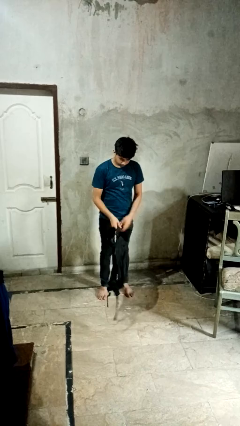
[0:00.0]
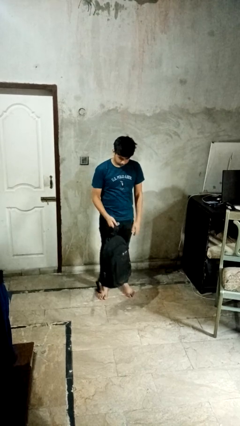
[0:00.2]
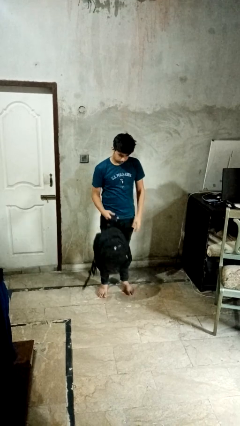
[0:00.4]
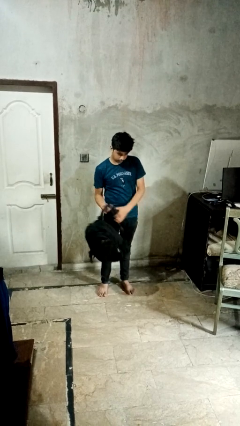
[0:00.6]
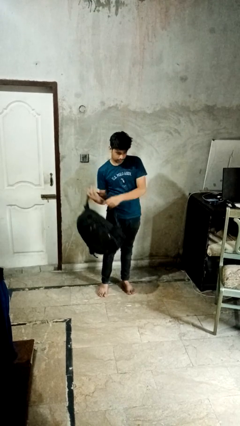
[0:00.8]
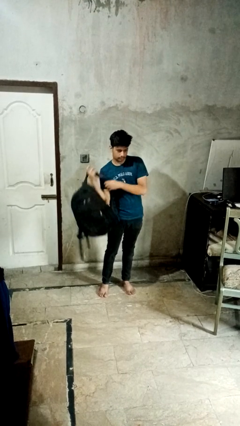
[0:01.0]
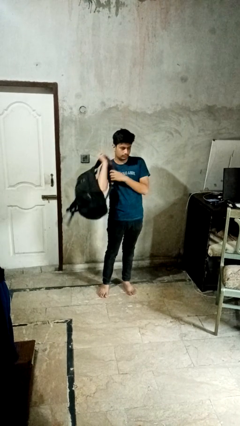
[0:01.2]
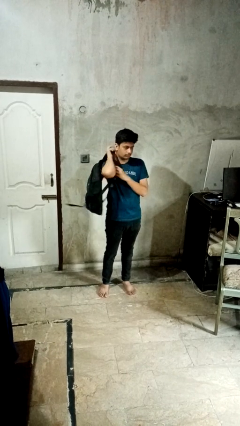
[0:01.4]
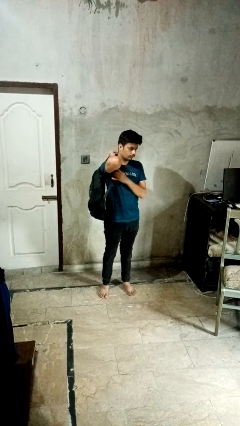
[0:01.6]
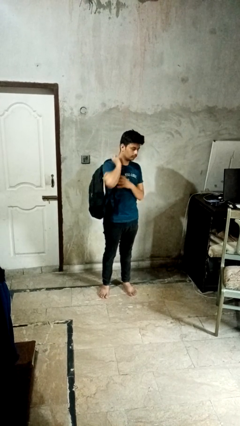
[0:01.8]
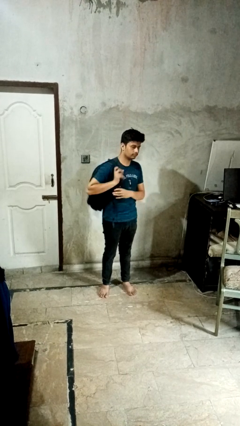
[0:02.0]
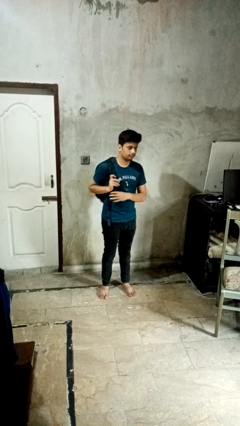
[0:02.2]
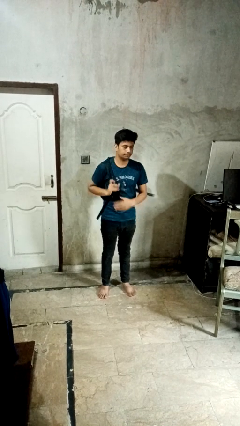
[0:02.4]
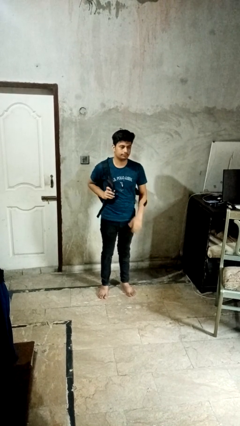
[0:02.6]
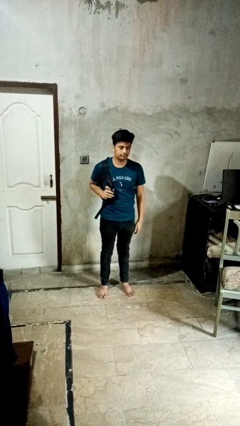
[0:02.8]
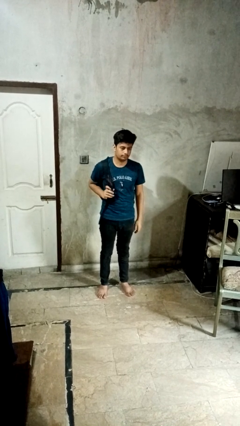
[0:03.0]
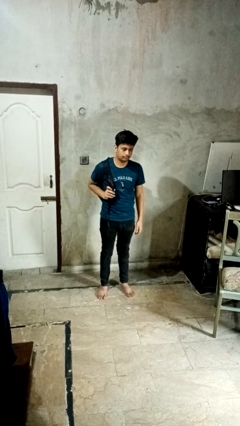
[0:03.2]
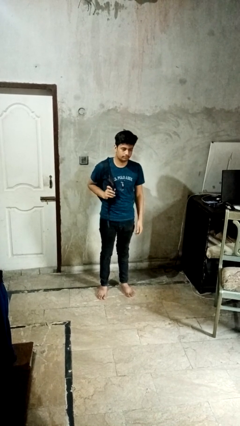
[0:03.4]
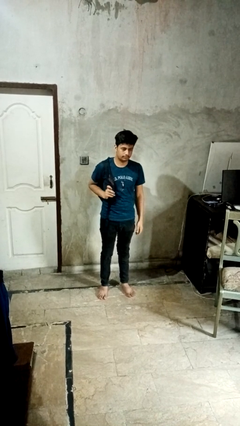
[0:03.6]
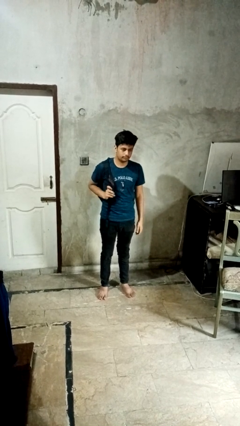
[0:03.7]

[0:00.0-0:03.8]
person puts on backpack

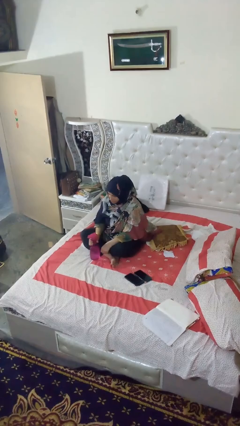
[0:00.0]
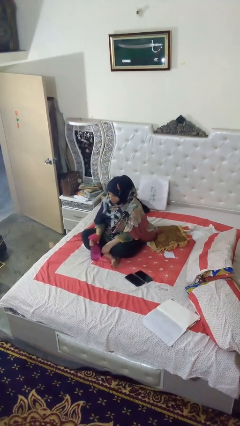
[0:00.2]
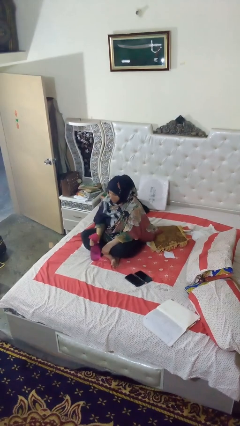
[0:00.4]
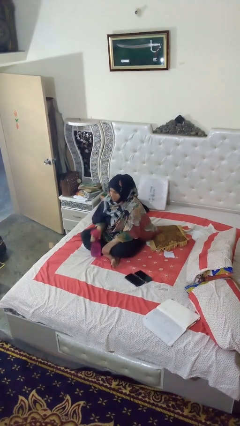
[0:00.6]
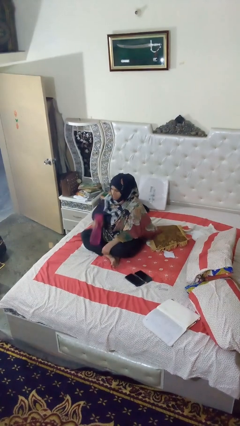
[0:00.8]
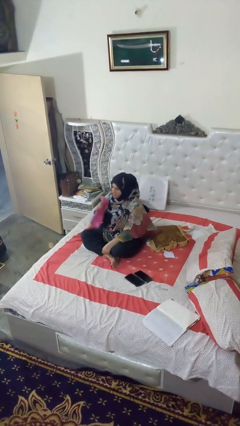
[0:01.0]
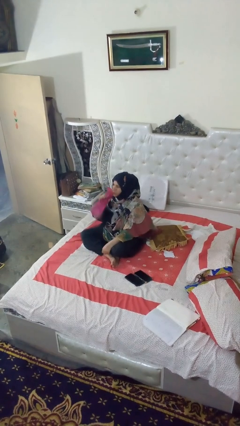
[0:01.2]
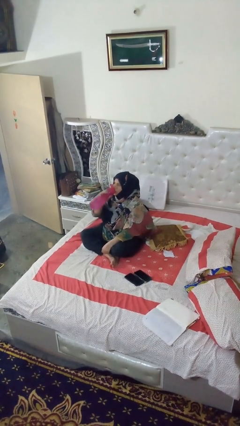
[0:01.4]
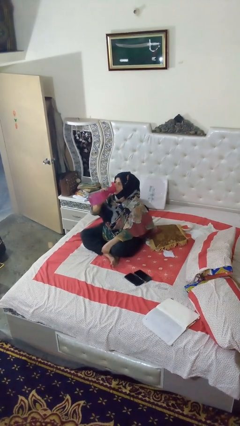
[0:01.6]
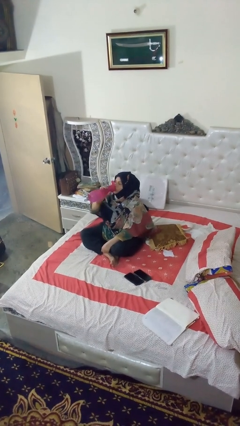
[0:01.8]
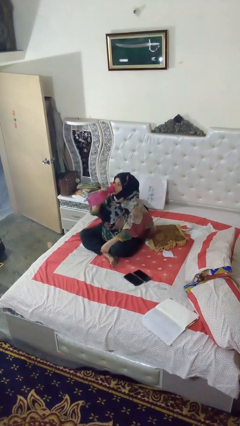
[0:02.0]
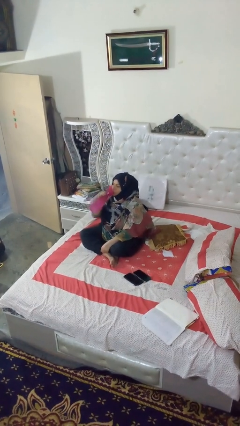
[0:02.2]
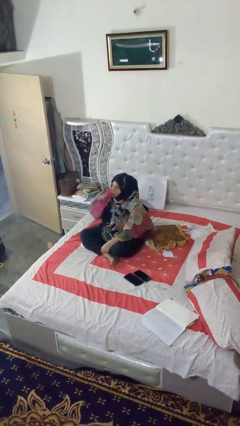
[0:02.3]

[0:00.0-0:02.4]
person drinks from bottle

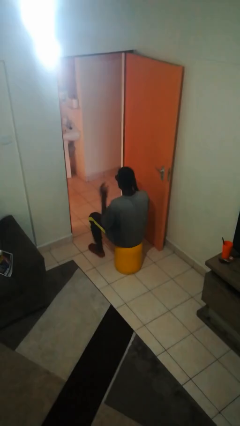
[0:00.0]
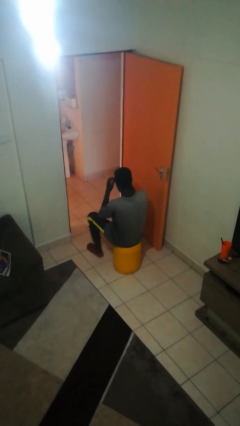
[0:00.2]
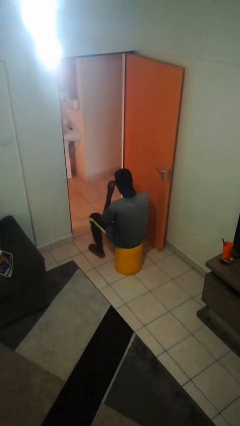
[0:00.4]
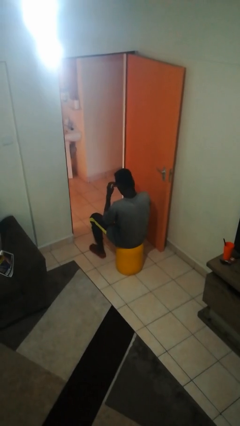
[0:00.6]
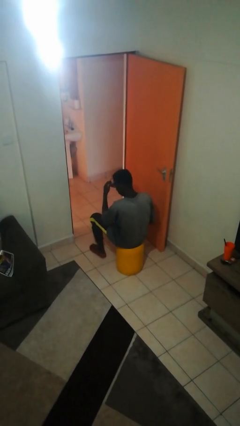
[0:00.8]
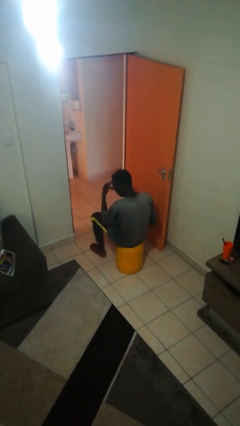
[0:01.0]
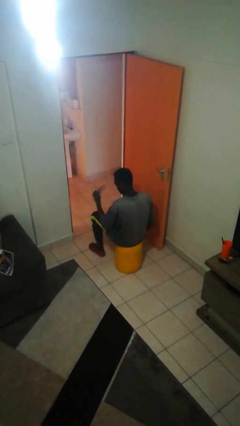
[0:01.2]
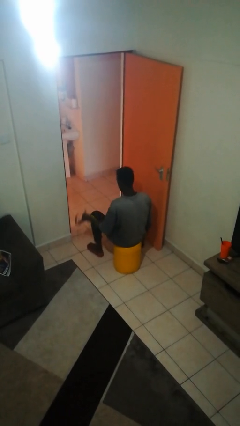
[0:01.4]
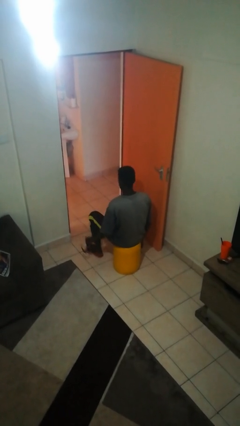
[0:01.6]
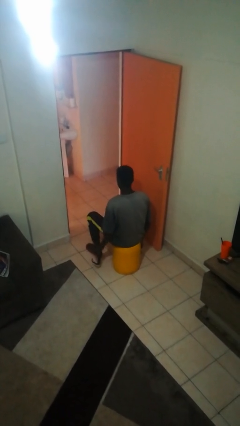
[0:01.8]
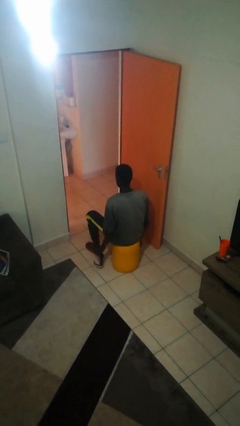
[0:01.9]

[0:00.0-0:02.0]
person takes off sunglasses

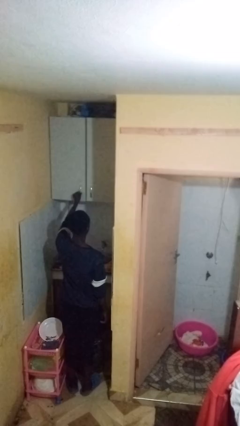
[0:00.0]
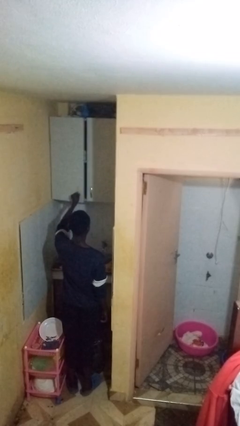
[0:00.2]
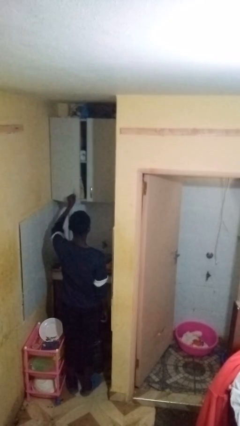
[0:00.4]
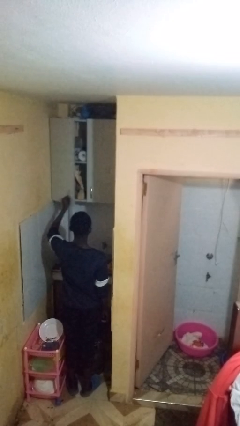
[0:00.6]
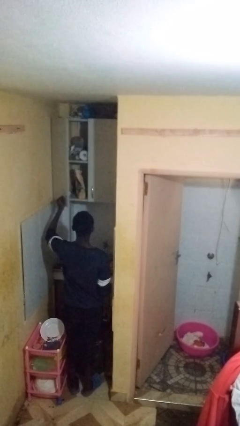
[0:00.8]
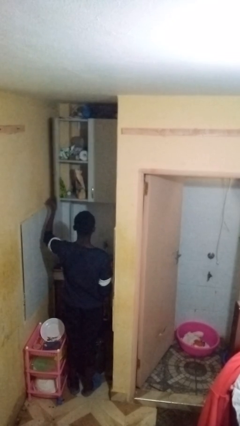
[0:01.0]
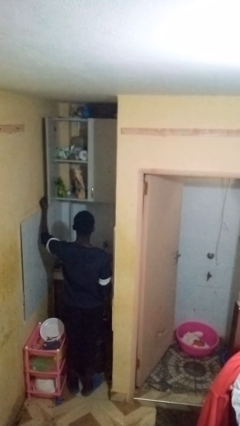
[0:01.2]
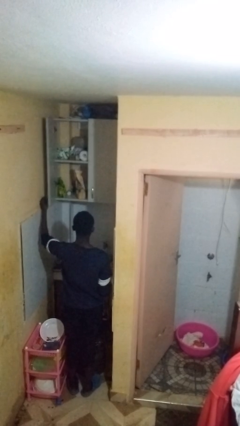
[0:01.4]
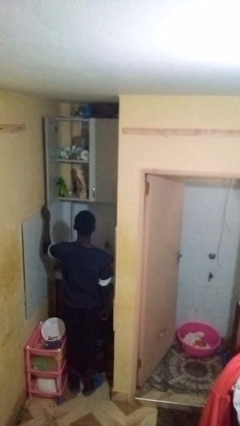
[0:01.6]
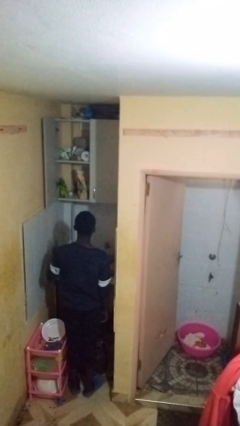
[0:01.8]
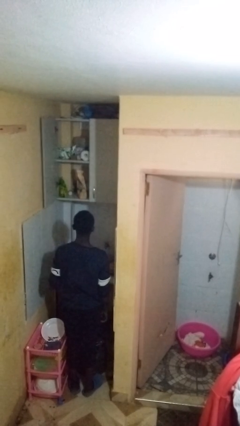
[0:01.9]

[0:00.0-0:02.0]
person opens cabinet

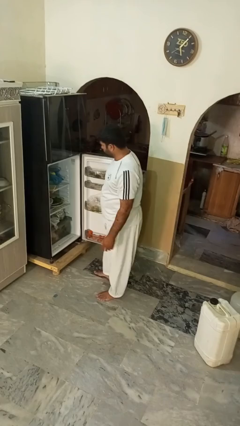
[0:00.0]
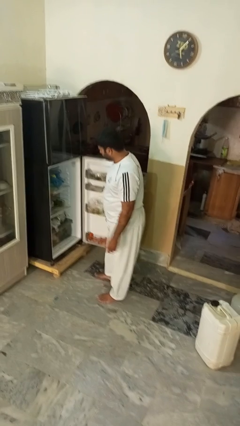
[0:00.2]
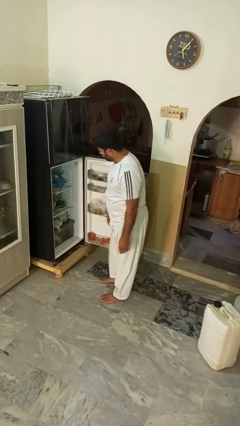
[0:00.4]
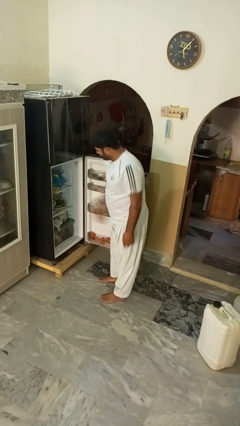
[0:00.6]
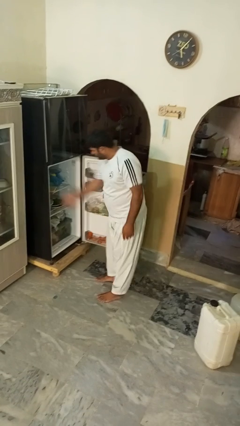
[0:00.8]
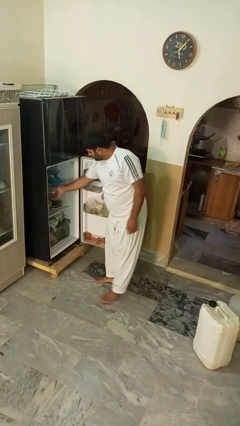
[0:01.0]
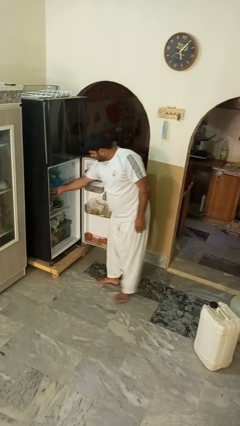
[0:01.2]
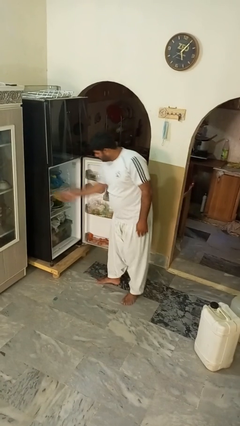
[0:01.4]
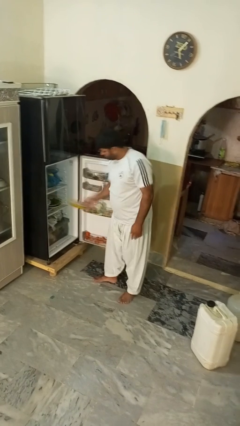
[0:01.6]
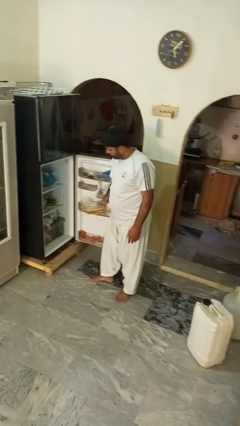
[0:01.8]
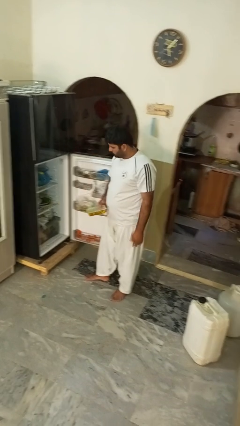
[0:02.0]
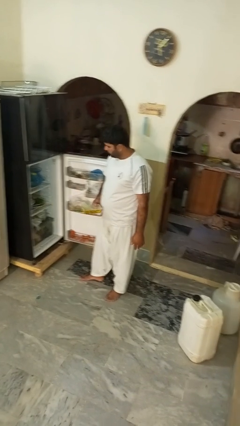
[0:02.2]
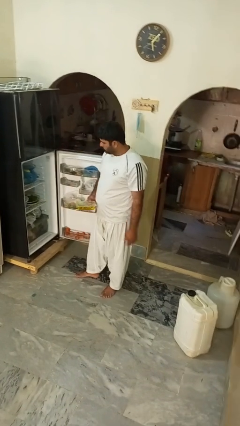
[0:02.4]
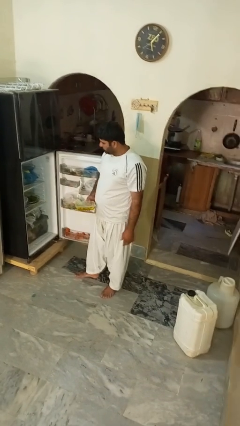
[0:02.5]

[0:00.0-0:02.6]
person takes object from refrigerator

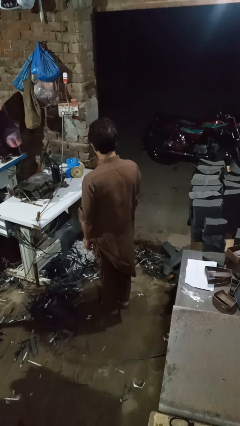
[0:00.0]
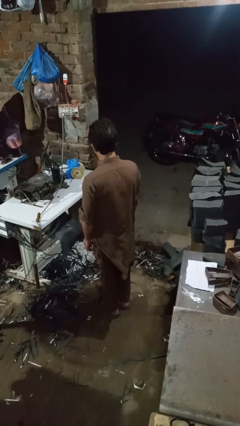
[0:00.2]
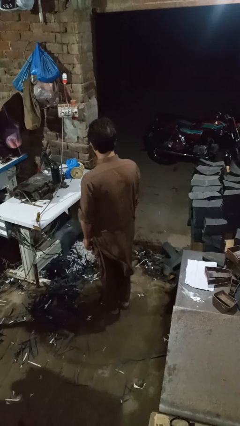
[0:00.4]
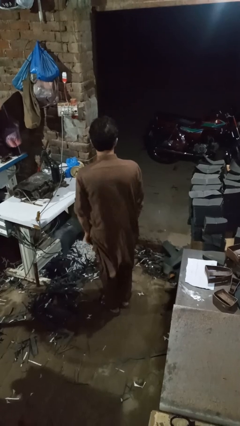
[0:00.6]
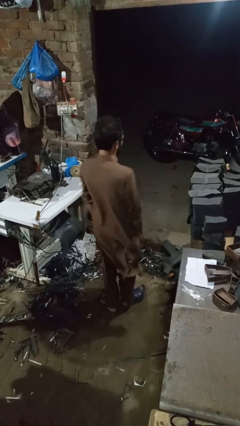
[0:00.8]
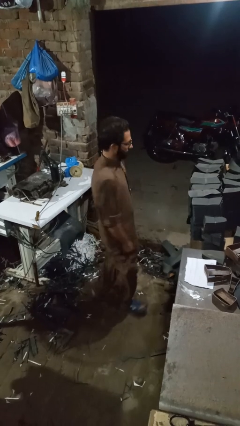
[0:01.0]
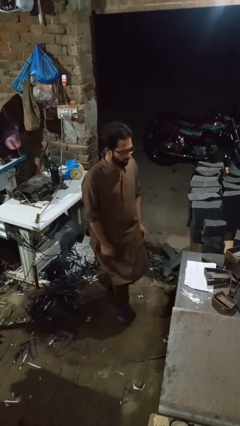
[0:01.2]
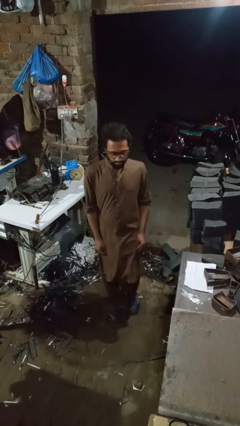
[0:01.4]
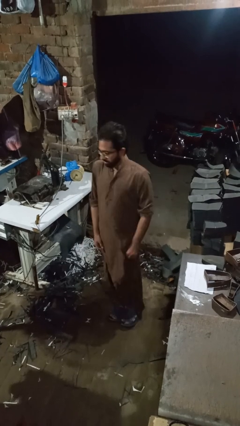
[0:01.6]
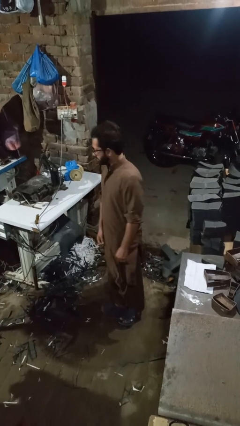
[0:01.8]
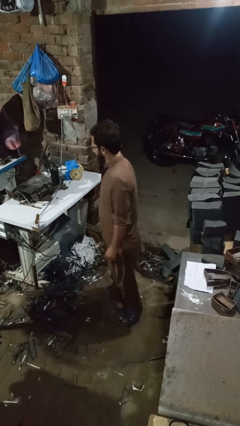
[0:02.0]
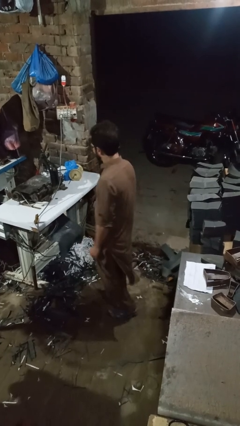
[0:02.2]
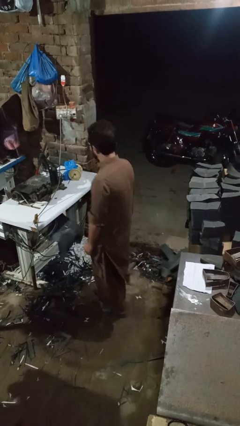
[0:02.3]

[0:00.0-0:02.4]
person twirls

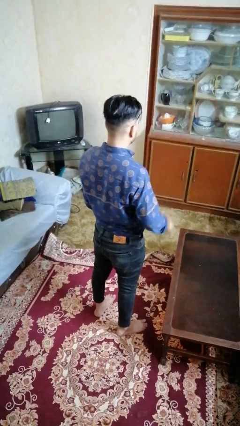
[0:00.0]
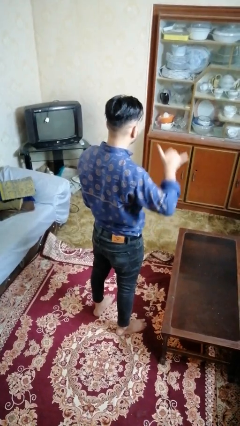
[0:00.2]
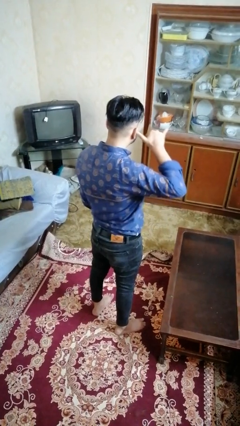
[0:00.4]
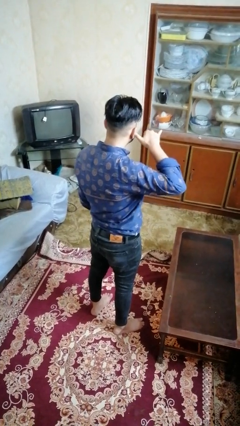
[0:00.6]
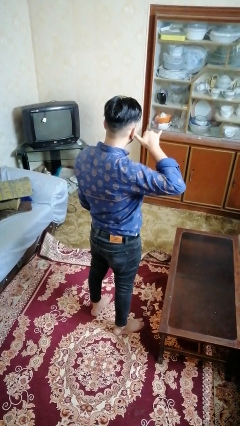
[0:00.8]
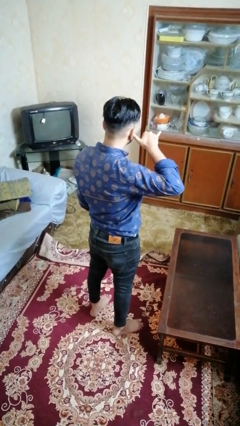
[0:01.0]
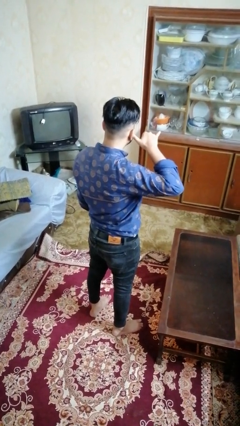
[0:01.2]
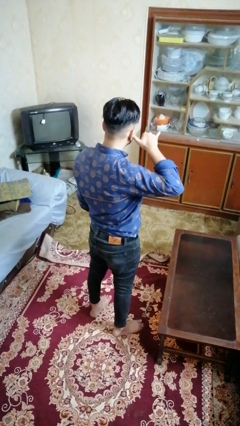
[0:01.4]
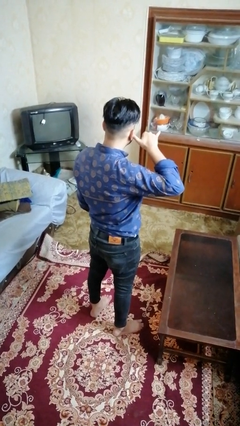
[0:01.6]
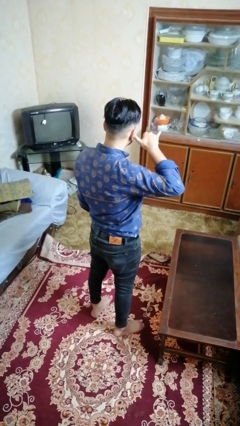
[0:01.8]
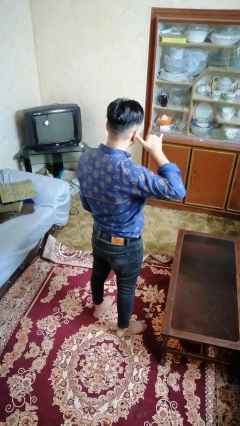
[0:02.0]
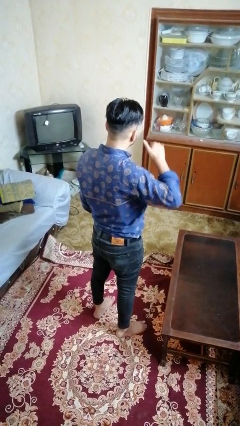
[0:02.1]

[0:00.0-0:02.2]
person gestures call me
